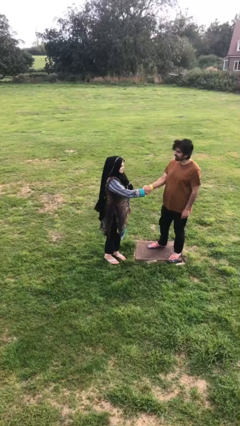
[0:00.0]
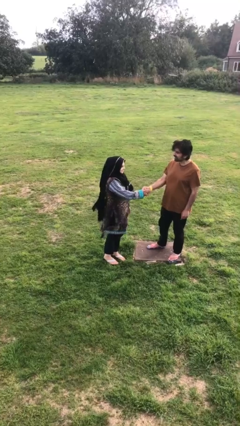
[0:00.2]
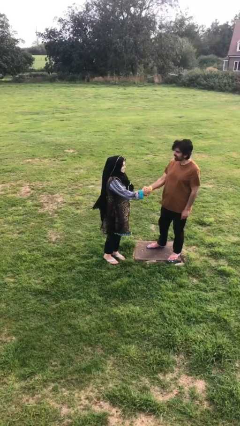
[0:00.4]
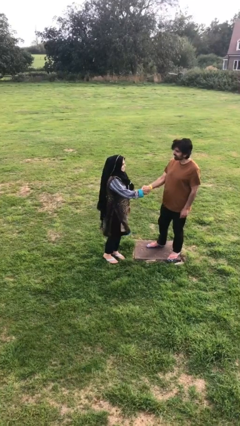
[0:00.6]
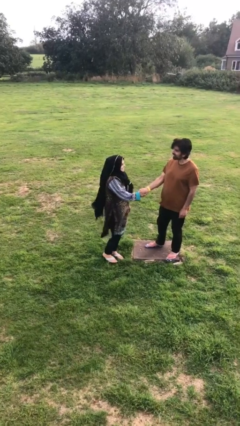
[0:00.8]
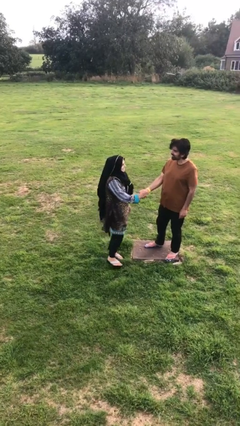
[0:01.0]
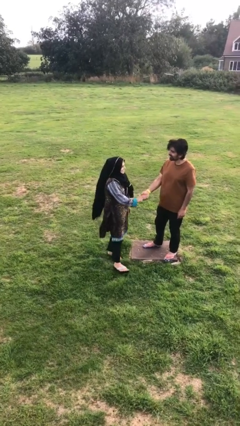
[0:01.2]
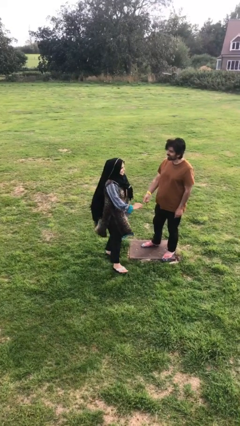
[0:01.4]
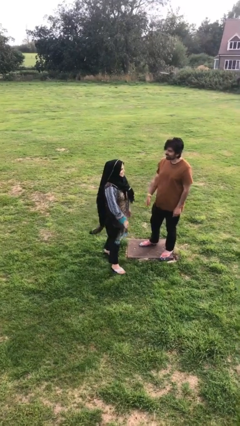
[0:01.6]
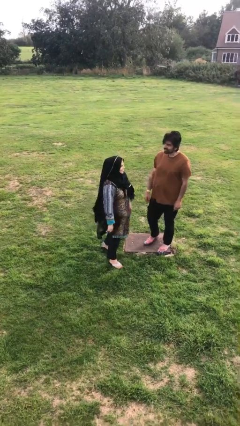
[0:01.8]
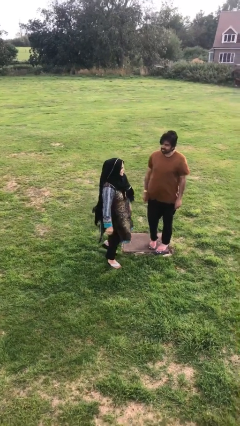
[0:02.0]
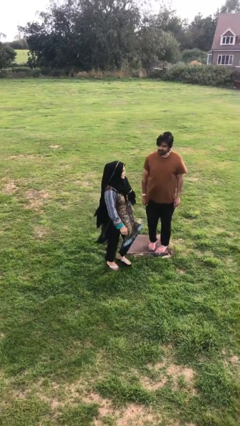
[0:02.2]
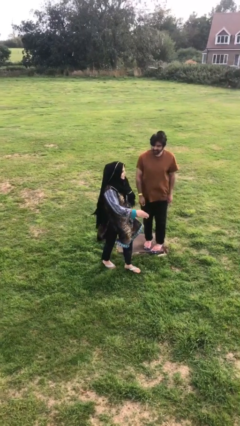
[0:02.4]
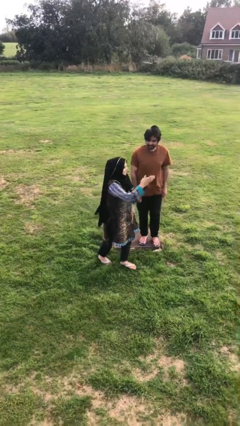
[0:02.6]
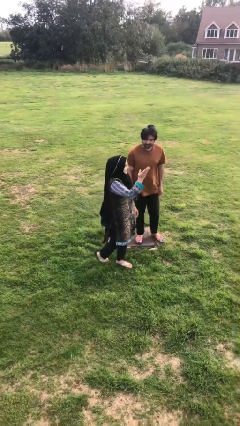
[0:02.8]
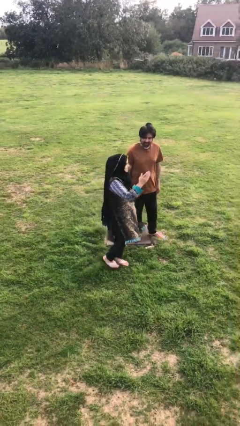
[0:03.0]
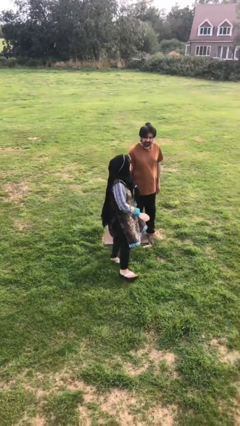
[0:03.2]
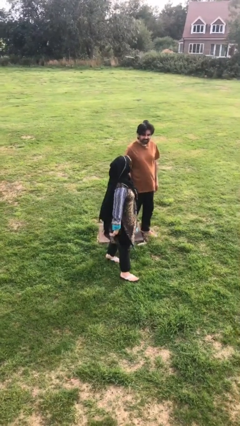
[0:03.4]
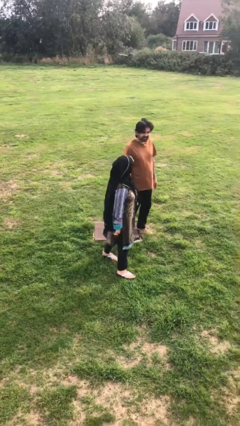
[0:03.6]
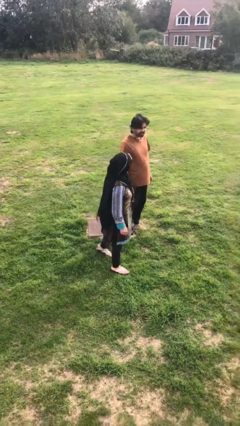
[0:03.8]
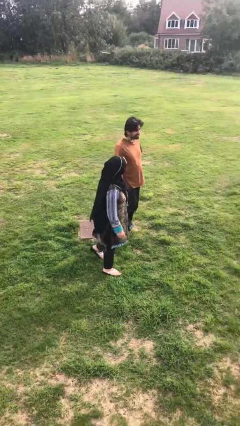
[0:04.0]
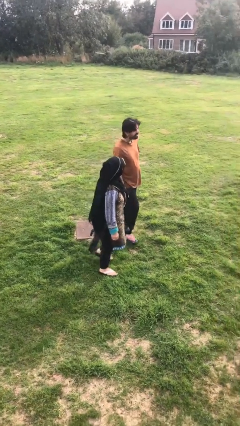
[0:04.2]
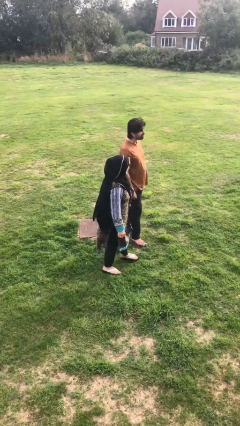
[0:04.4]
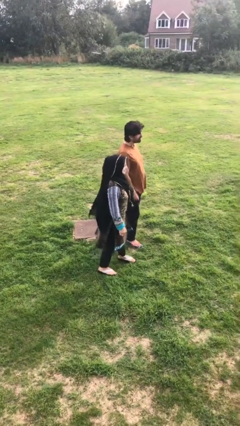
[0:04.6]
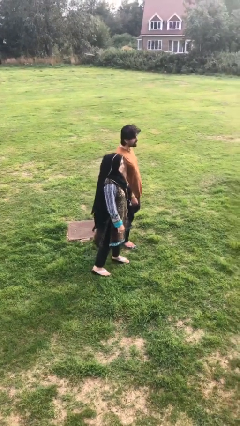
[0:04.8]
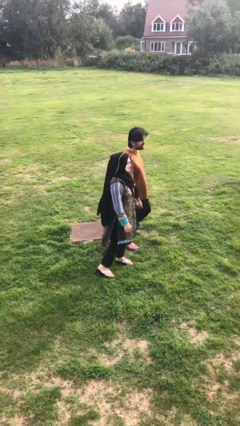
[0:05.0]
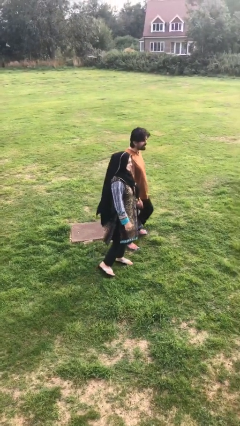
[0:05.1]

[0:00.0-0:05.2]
person talks to person

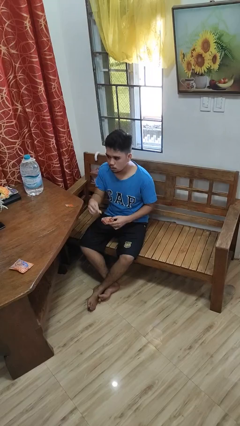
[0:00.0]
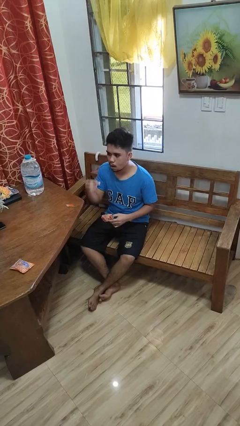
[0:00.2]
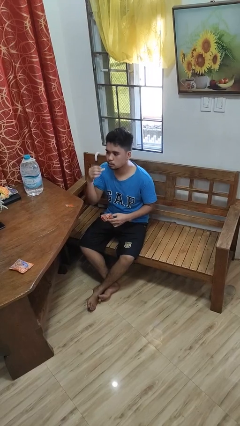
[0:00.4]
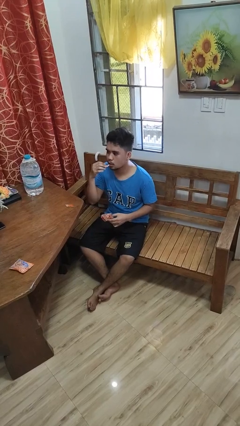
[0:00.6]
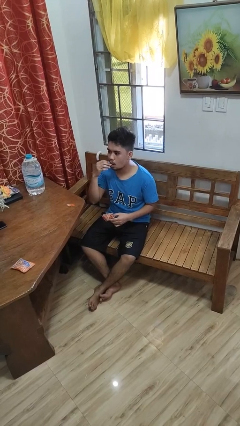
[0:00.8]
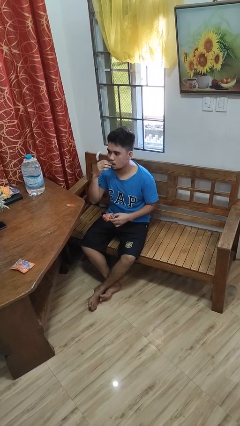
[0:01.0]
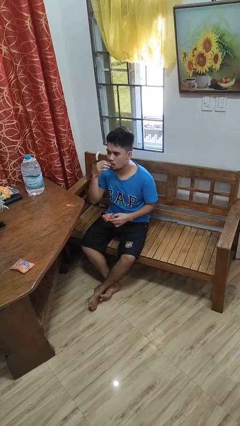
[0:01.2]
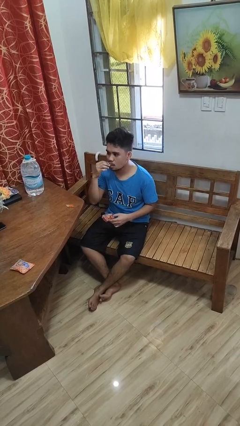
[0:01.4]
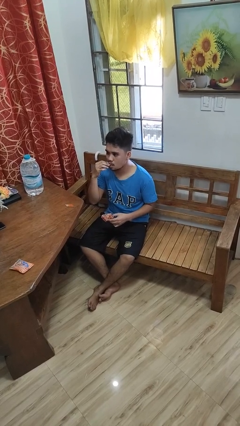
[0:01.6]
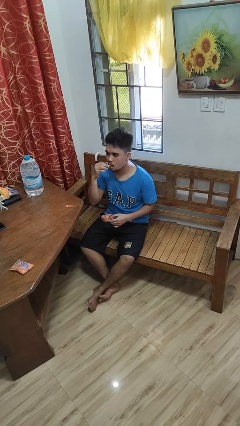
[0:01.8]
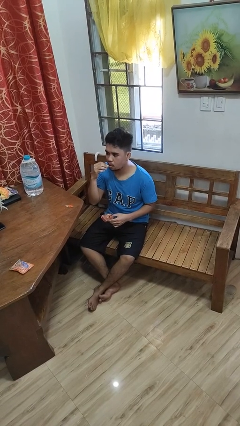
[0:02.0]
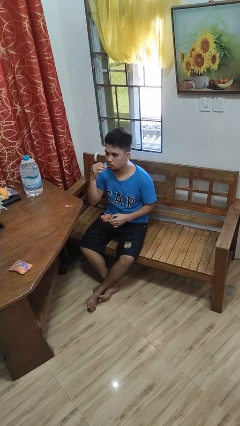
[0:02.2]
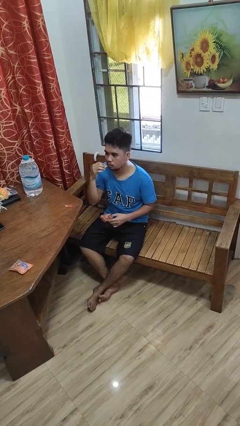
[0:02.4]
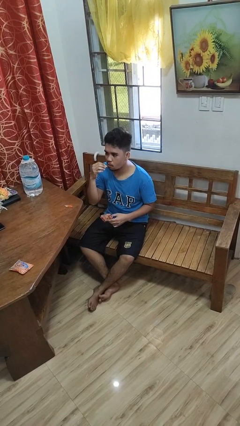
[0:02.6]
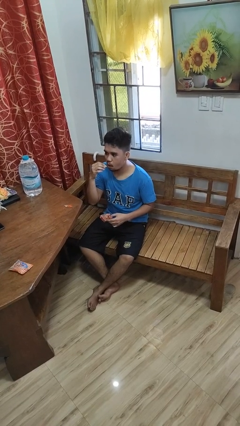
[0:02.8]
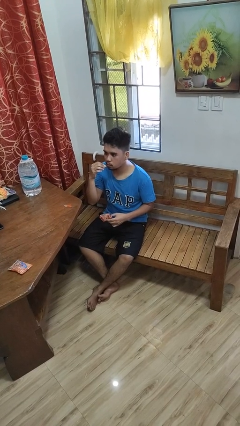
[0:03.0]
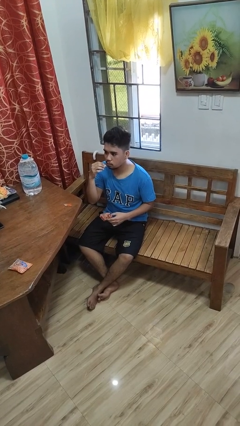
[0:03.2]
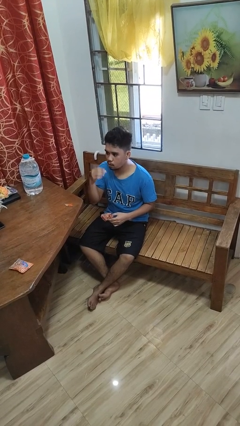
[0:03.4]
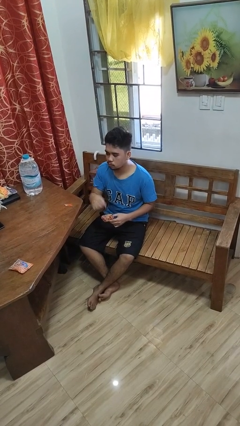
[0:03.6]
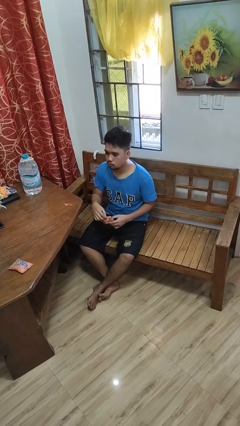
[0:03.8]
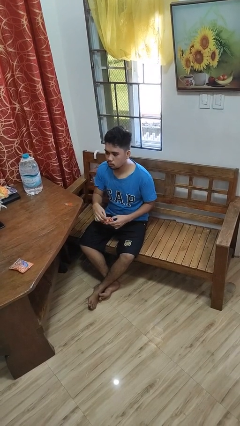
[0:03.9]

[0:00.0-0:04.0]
person eats snack from bag

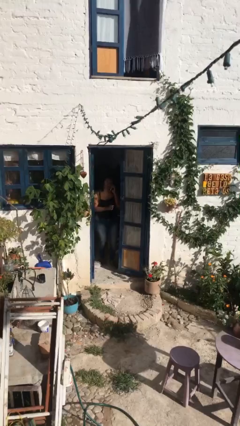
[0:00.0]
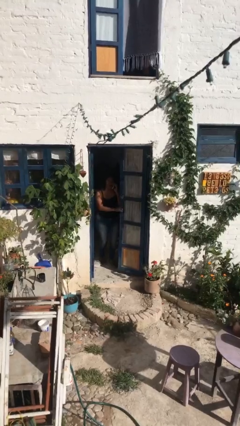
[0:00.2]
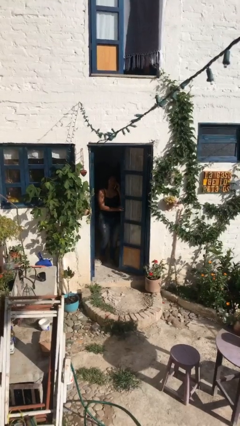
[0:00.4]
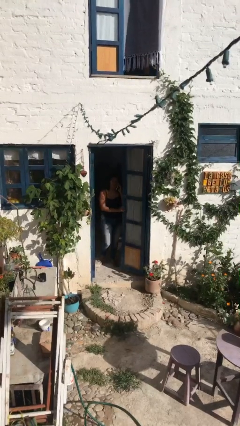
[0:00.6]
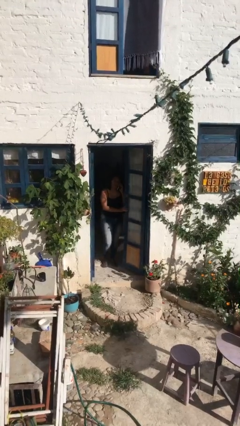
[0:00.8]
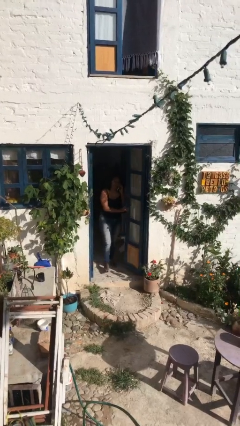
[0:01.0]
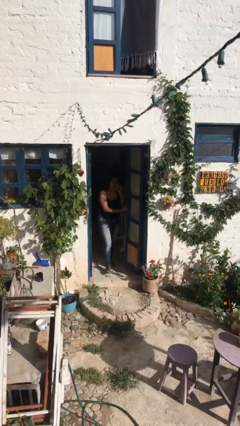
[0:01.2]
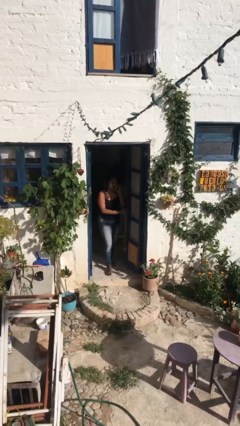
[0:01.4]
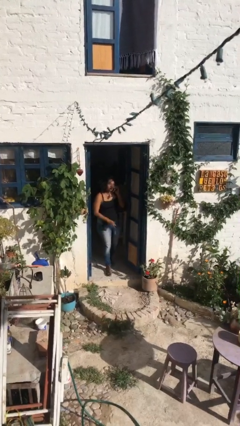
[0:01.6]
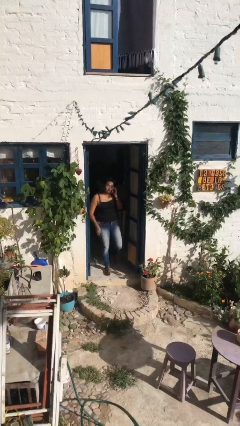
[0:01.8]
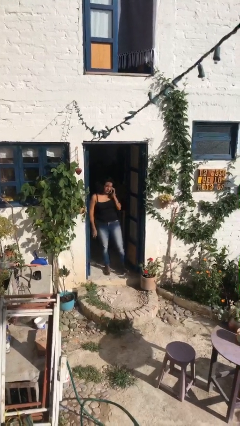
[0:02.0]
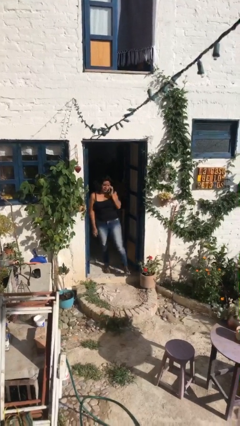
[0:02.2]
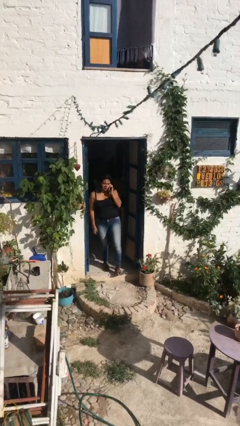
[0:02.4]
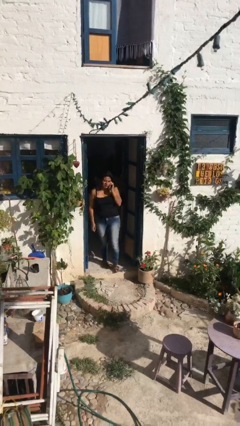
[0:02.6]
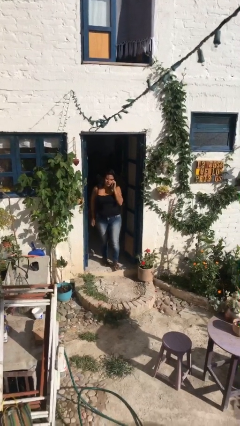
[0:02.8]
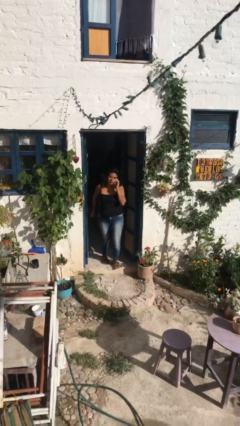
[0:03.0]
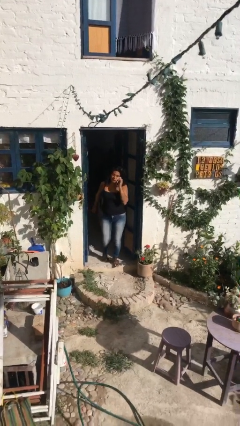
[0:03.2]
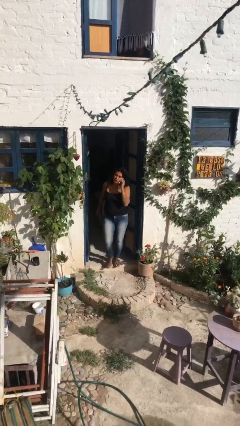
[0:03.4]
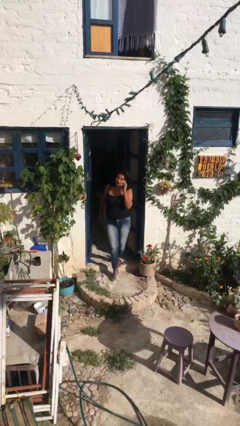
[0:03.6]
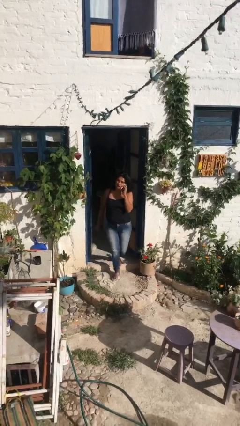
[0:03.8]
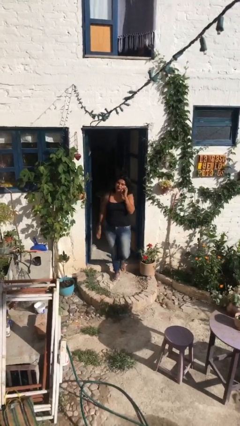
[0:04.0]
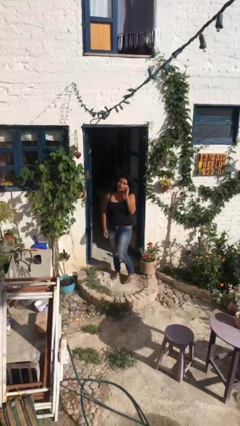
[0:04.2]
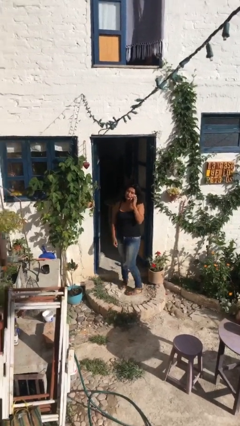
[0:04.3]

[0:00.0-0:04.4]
person enters scene through structure

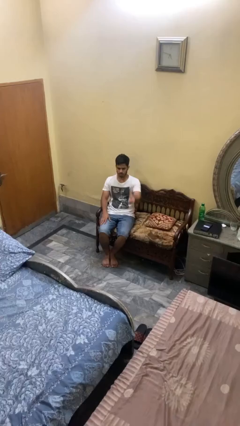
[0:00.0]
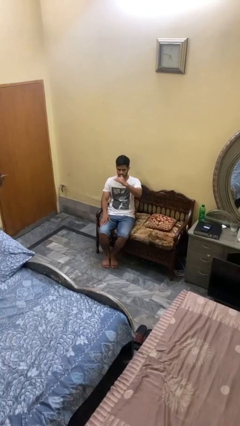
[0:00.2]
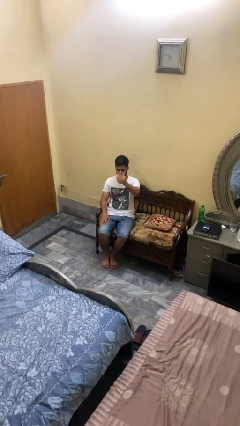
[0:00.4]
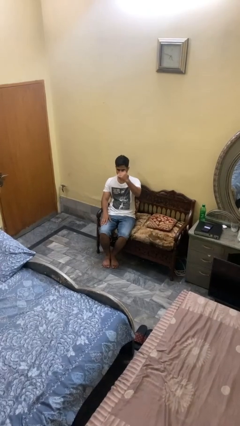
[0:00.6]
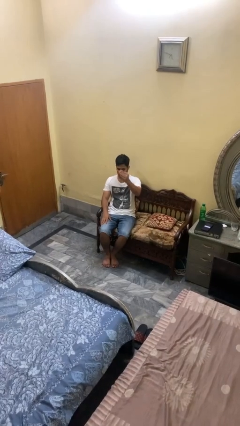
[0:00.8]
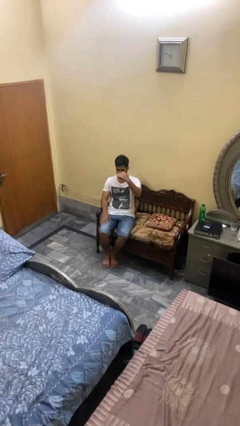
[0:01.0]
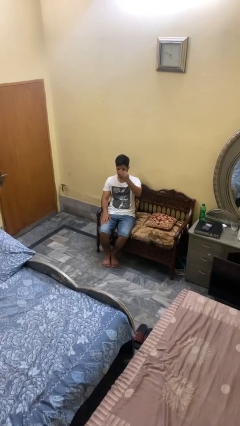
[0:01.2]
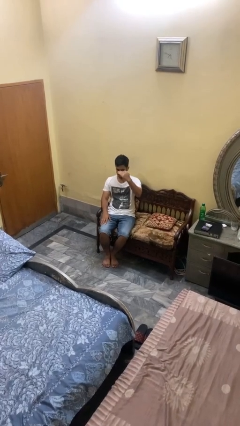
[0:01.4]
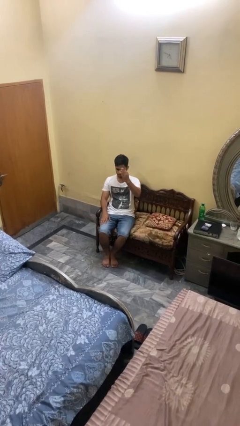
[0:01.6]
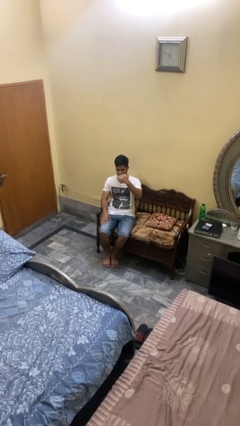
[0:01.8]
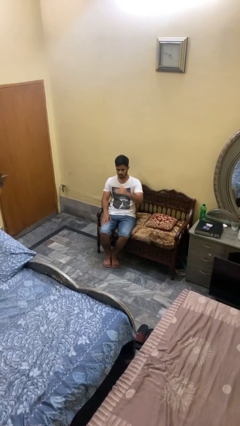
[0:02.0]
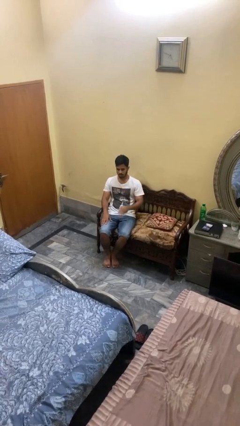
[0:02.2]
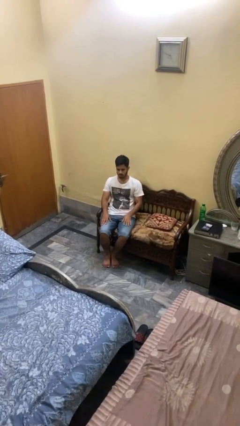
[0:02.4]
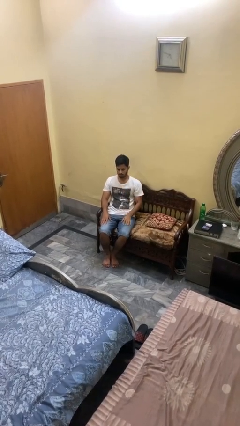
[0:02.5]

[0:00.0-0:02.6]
person gestures come here

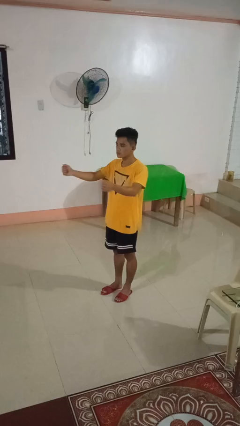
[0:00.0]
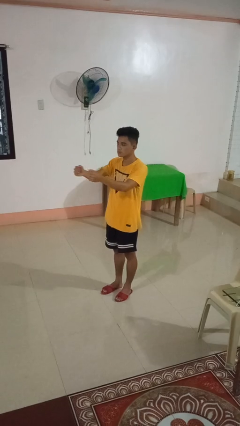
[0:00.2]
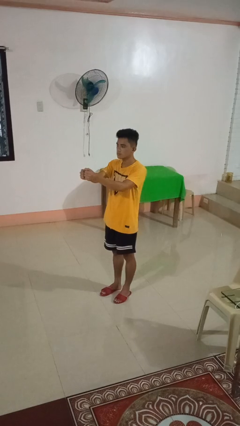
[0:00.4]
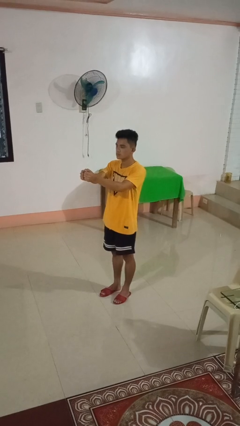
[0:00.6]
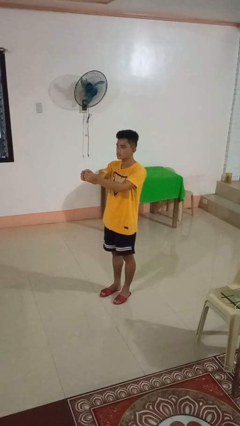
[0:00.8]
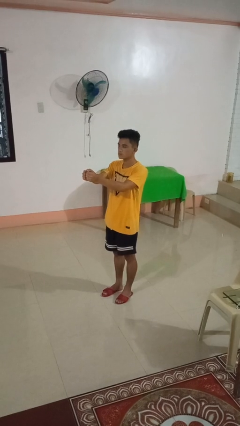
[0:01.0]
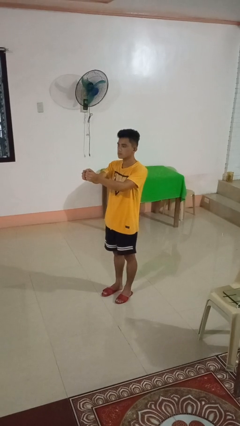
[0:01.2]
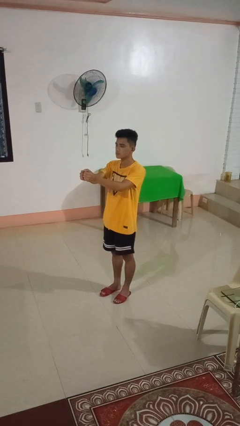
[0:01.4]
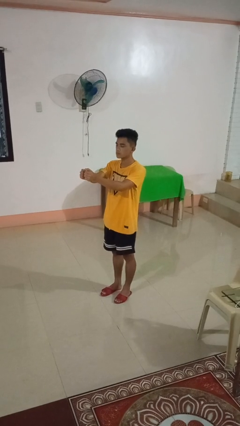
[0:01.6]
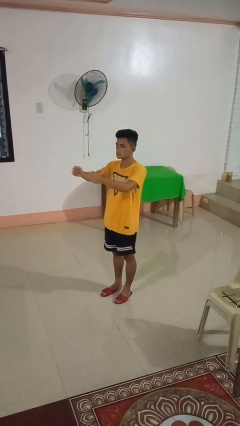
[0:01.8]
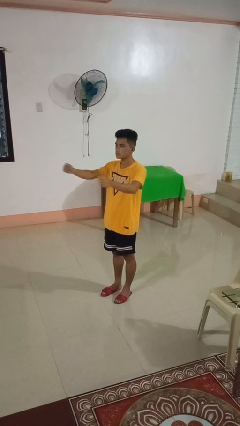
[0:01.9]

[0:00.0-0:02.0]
person gestures zoom in
